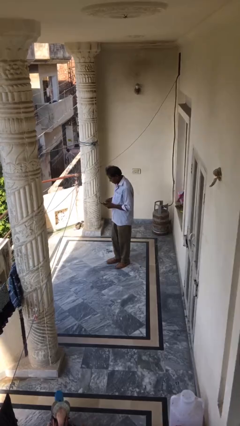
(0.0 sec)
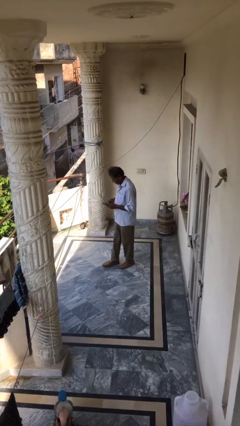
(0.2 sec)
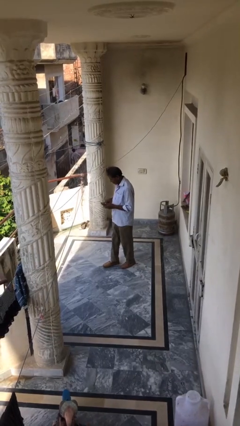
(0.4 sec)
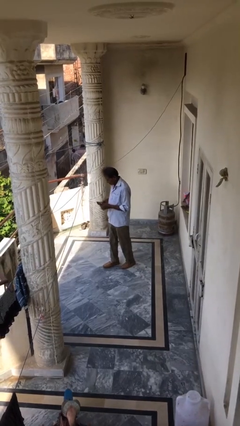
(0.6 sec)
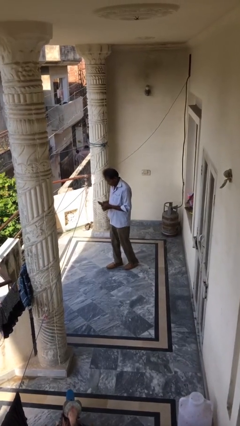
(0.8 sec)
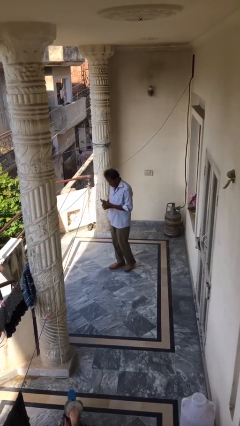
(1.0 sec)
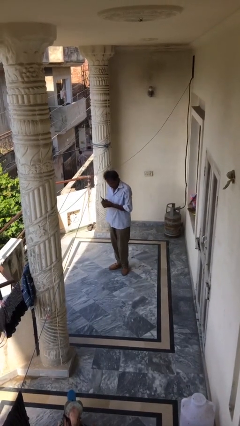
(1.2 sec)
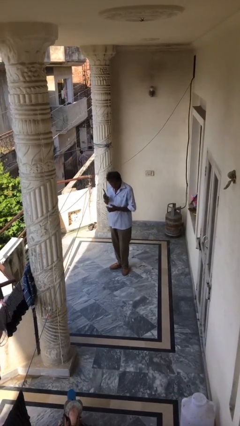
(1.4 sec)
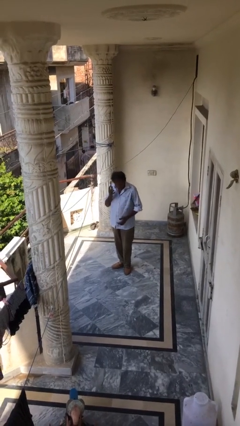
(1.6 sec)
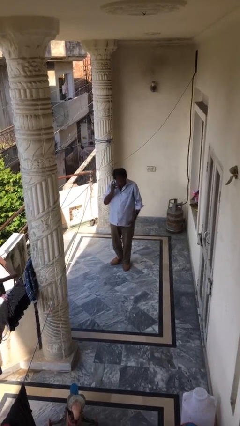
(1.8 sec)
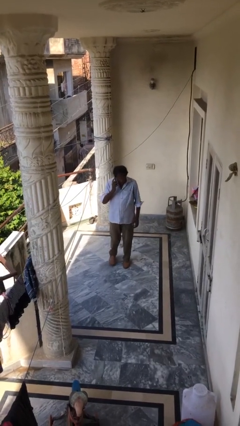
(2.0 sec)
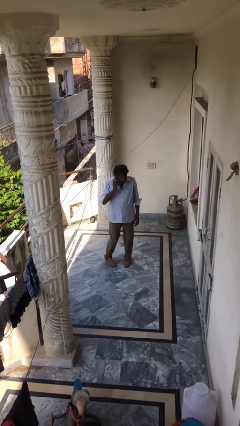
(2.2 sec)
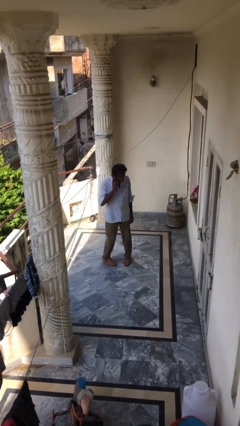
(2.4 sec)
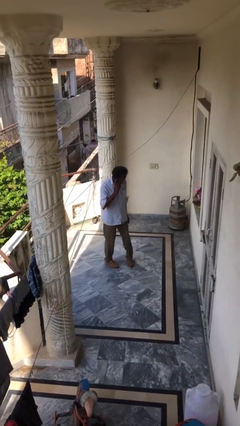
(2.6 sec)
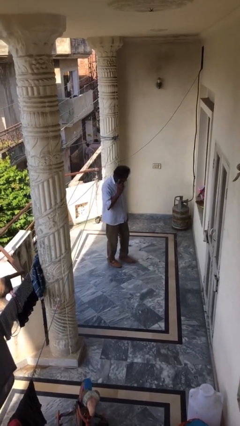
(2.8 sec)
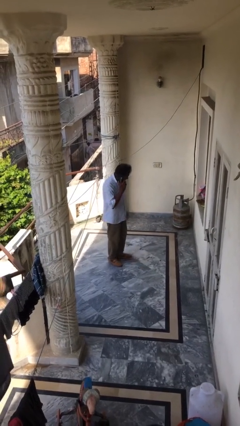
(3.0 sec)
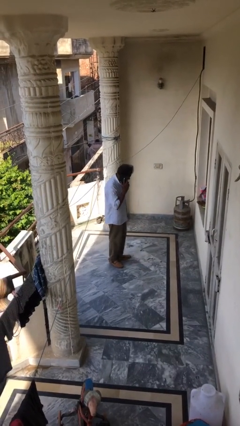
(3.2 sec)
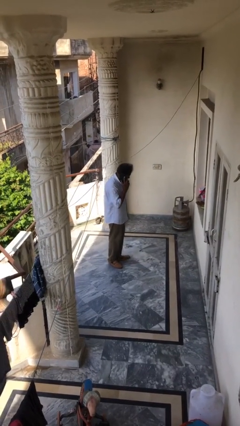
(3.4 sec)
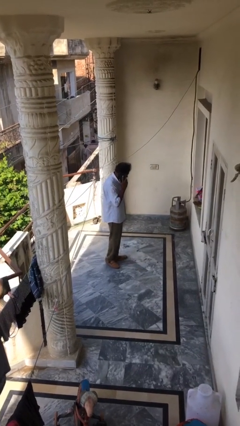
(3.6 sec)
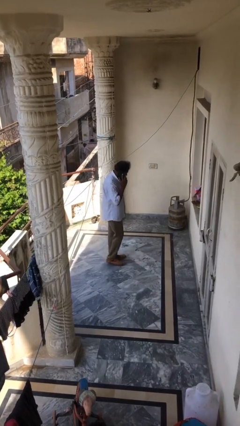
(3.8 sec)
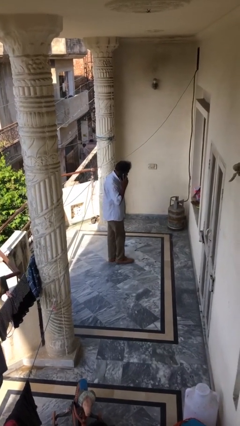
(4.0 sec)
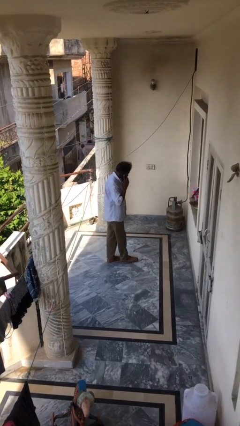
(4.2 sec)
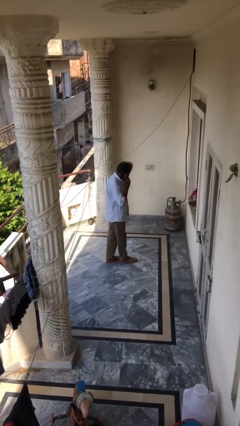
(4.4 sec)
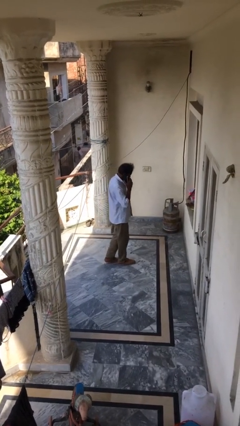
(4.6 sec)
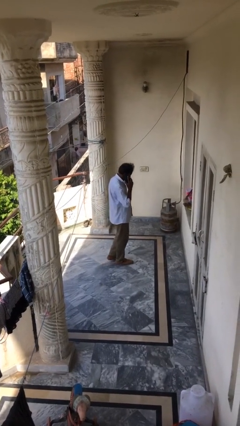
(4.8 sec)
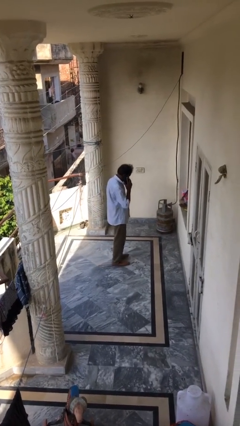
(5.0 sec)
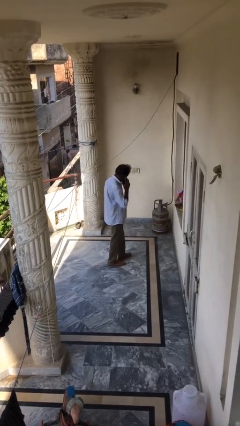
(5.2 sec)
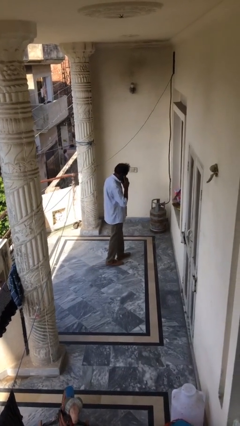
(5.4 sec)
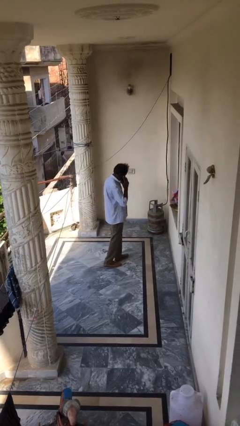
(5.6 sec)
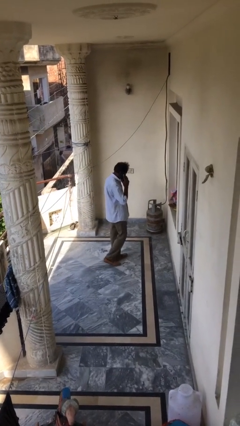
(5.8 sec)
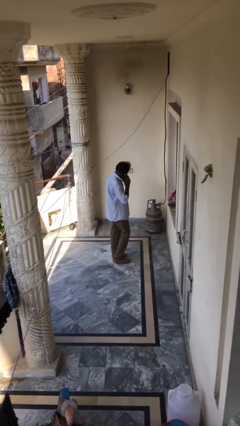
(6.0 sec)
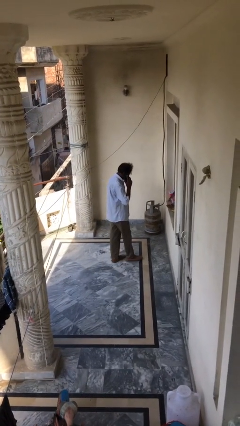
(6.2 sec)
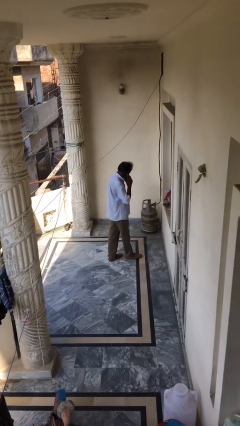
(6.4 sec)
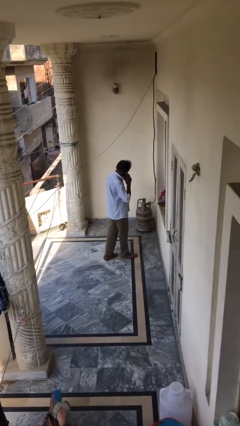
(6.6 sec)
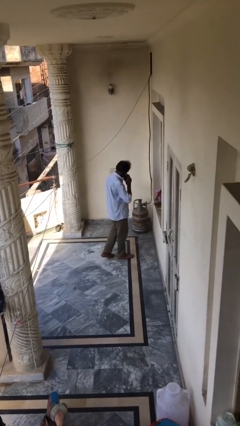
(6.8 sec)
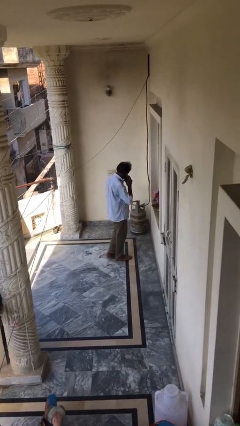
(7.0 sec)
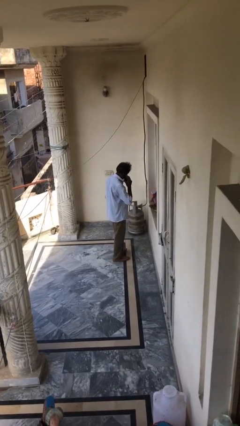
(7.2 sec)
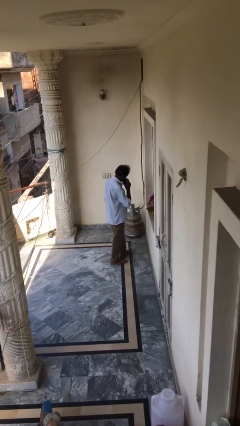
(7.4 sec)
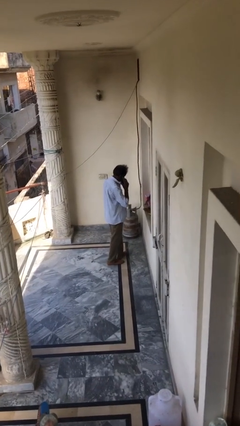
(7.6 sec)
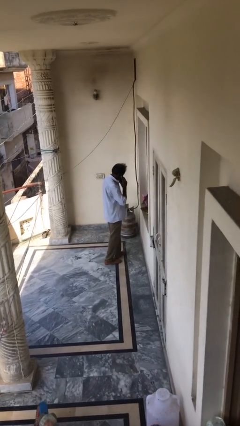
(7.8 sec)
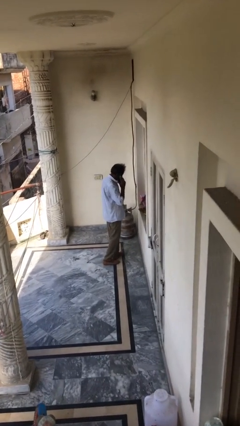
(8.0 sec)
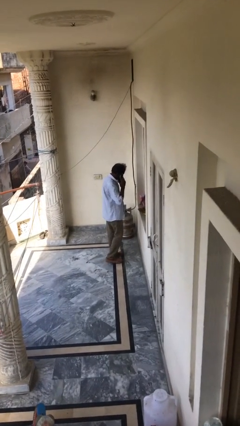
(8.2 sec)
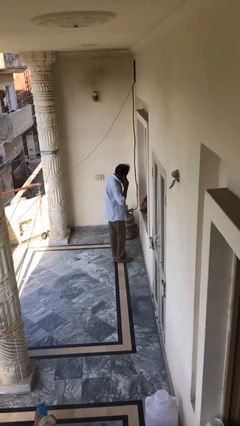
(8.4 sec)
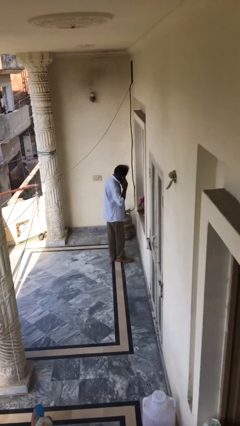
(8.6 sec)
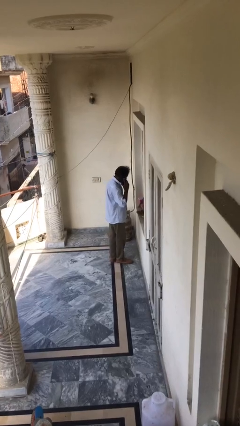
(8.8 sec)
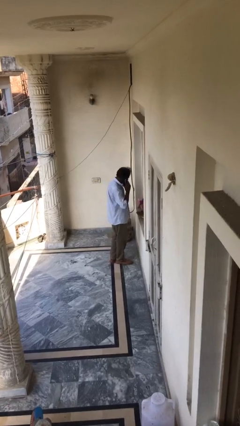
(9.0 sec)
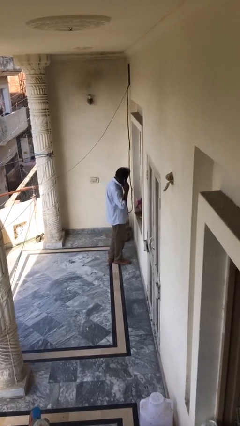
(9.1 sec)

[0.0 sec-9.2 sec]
person talks on phone

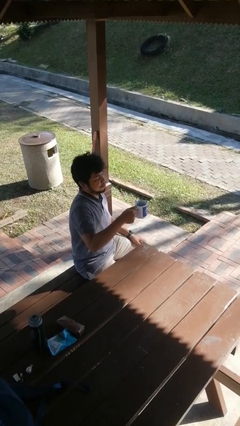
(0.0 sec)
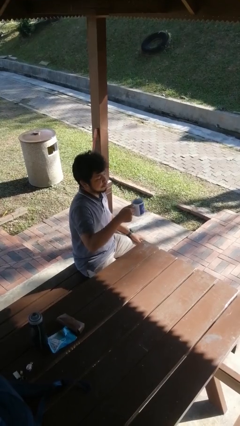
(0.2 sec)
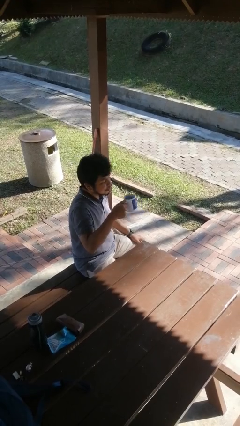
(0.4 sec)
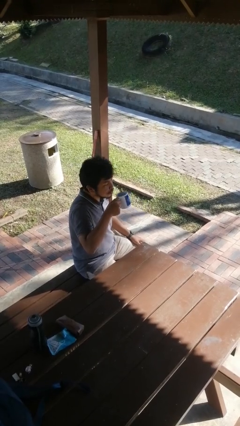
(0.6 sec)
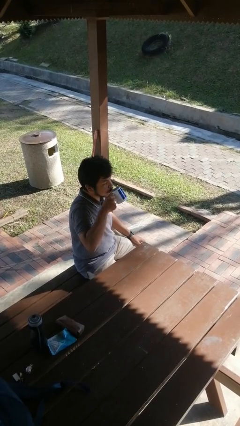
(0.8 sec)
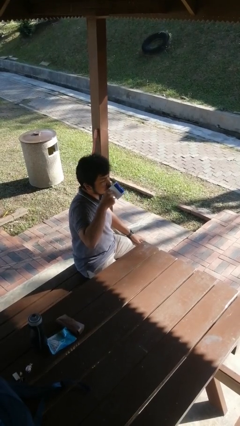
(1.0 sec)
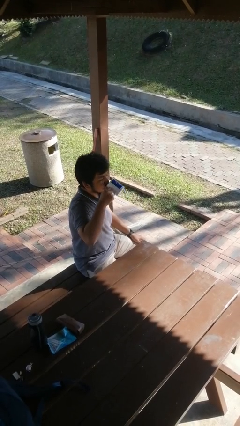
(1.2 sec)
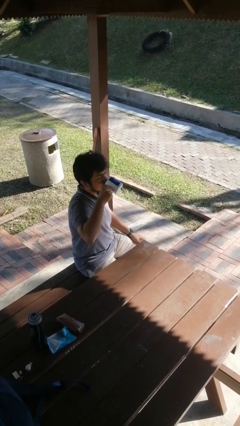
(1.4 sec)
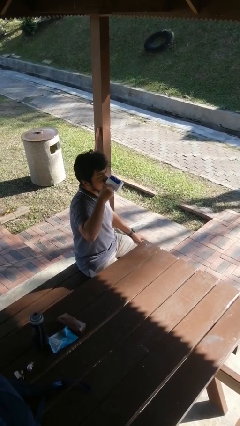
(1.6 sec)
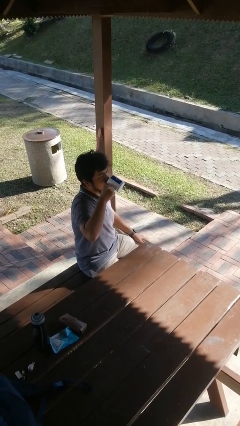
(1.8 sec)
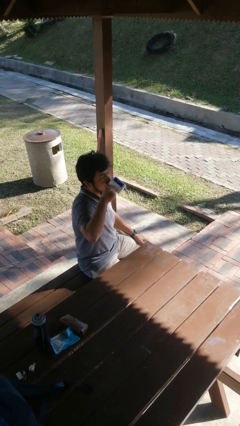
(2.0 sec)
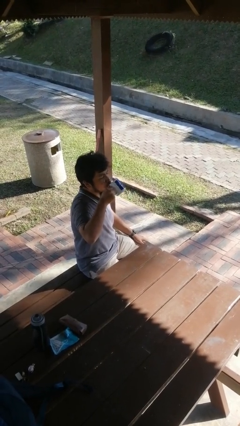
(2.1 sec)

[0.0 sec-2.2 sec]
person drinks from mug

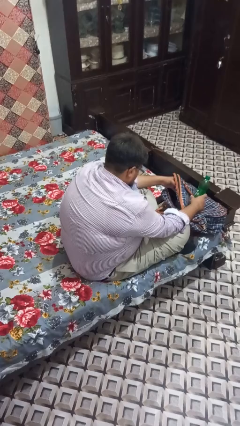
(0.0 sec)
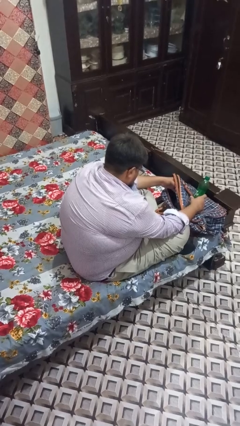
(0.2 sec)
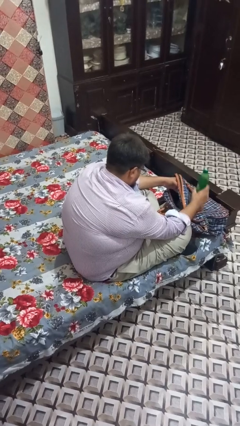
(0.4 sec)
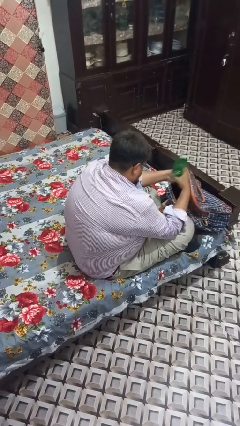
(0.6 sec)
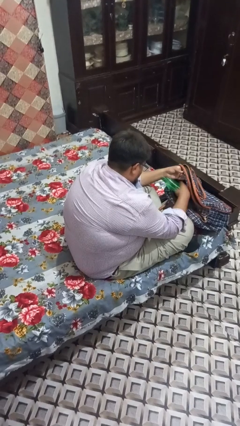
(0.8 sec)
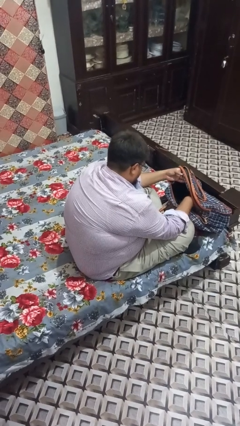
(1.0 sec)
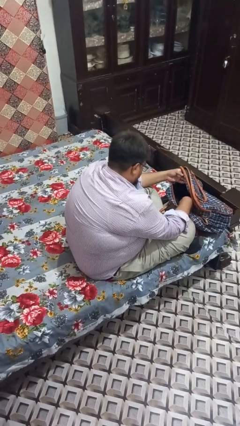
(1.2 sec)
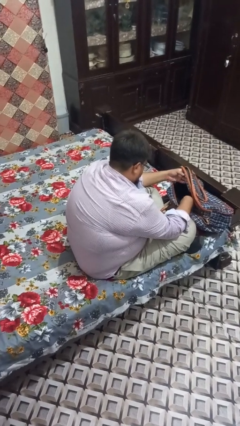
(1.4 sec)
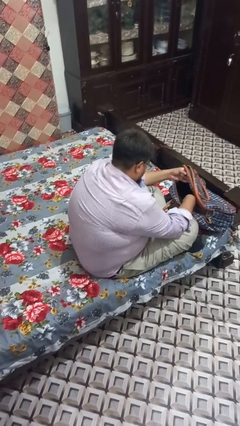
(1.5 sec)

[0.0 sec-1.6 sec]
person puts object into backpack

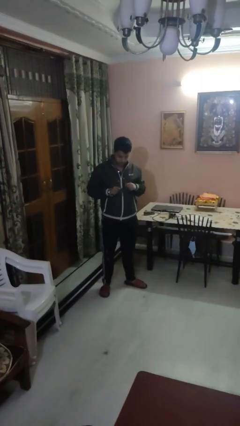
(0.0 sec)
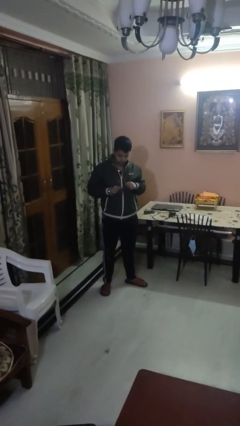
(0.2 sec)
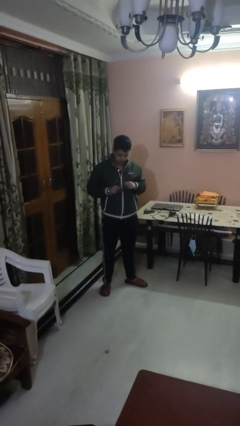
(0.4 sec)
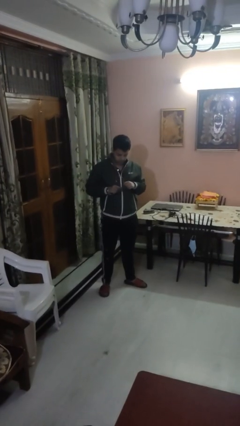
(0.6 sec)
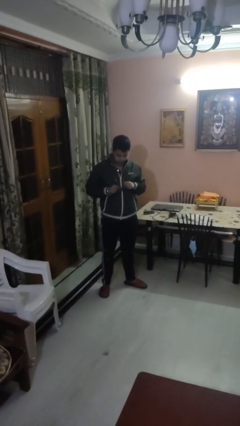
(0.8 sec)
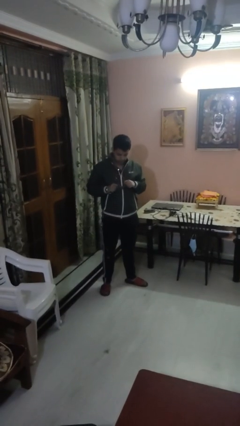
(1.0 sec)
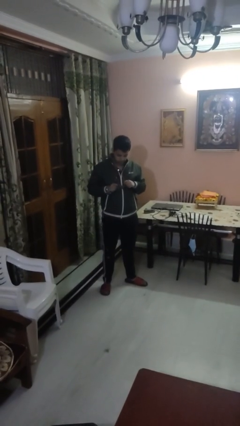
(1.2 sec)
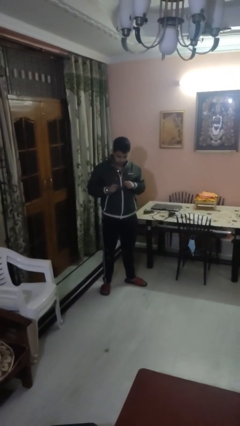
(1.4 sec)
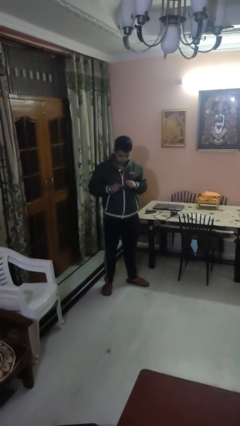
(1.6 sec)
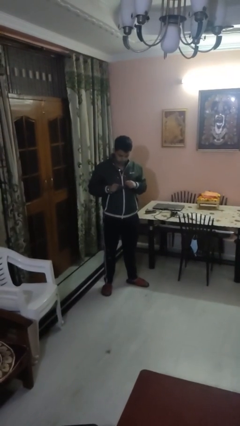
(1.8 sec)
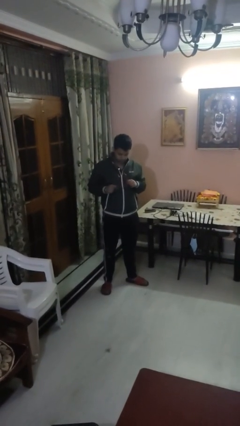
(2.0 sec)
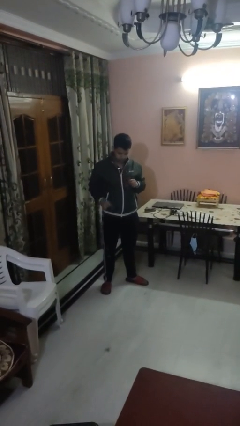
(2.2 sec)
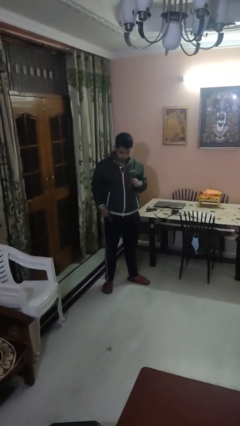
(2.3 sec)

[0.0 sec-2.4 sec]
person cleans eyeglasses

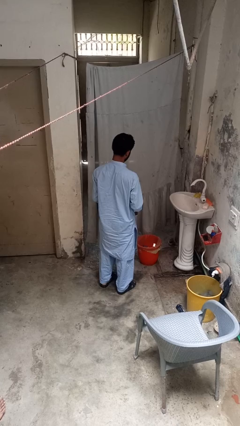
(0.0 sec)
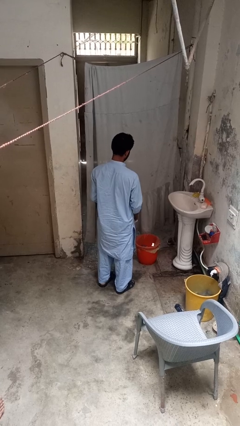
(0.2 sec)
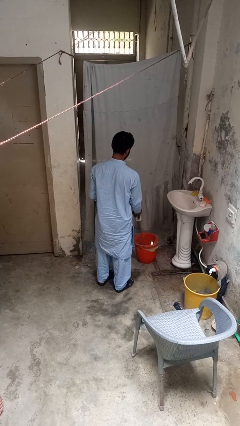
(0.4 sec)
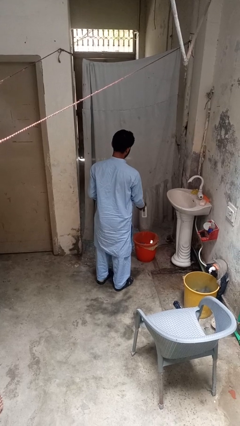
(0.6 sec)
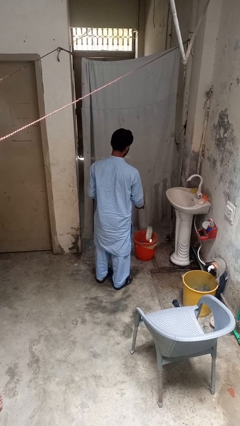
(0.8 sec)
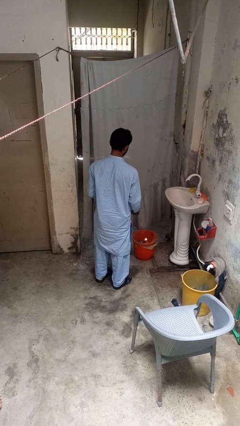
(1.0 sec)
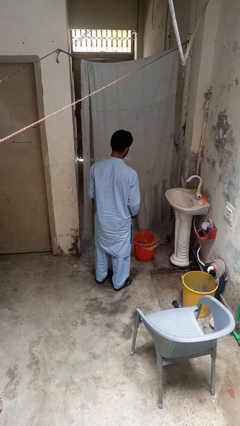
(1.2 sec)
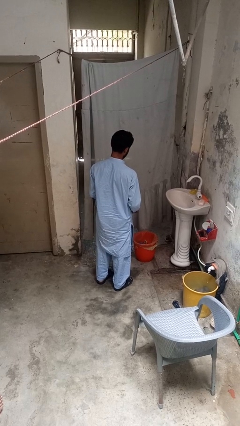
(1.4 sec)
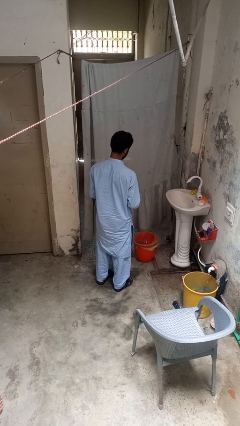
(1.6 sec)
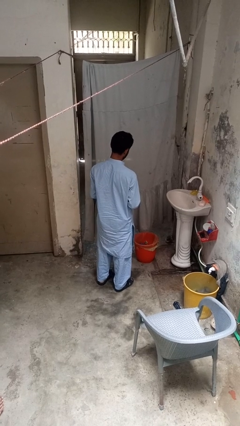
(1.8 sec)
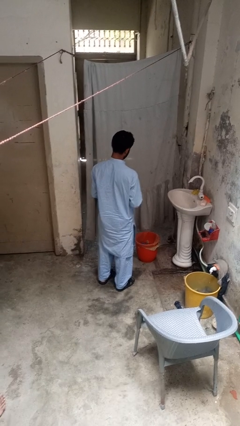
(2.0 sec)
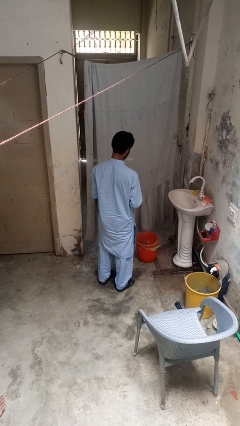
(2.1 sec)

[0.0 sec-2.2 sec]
person discards trash
